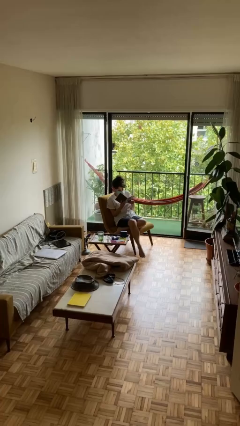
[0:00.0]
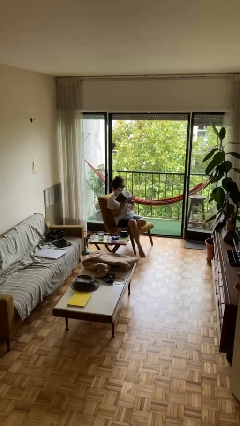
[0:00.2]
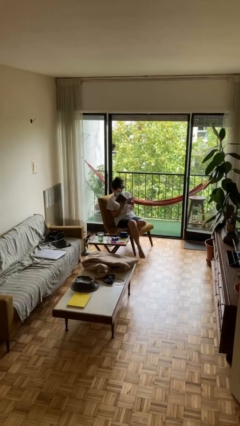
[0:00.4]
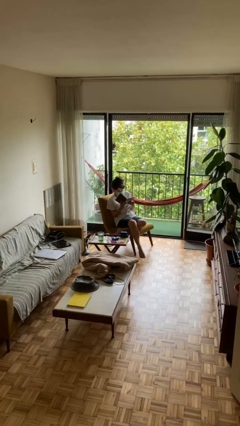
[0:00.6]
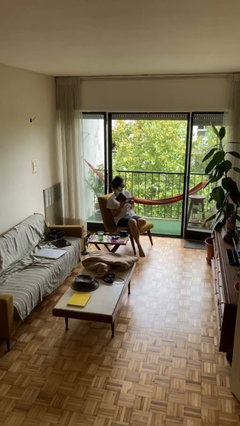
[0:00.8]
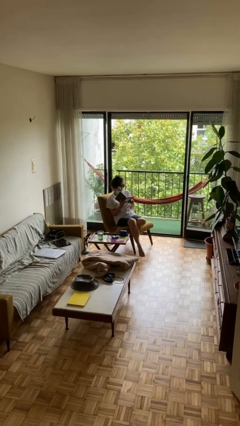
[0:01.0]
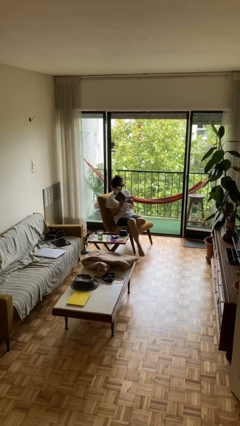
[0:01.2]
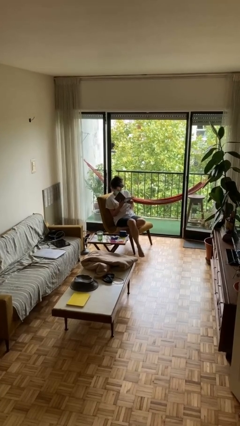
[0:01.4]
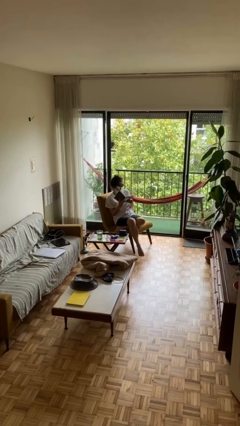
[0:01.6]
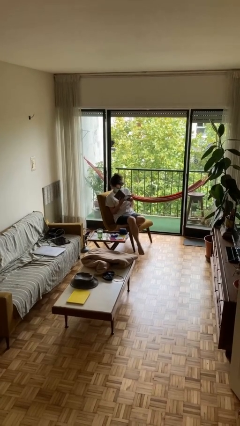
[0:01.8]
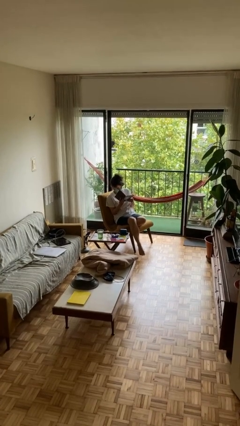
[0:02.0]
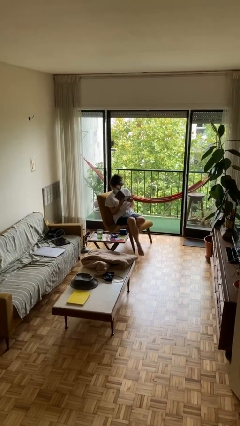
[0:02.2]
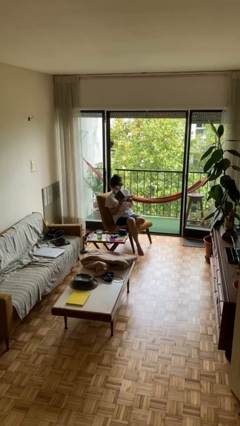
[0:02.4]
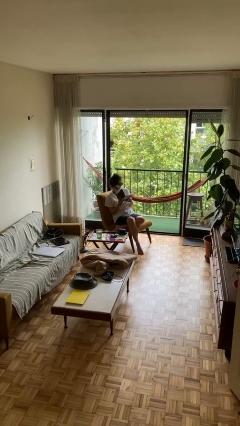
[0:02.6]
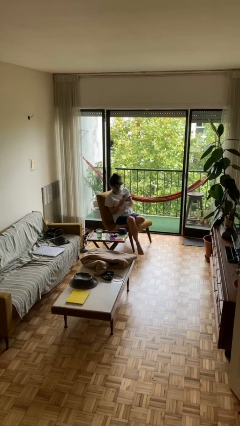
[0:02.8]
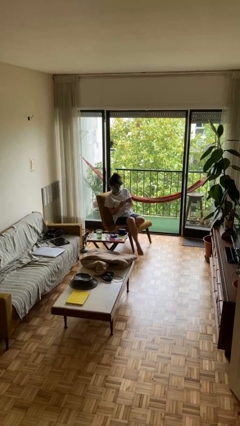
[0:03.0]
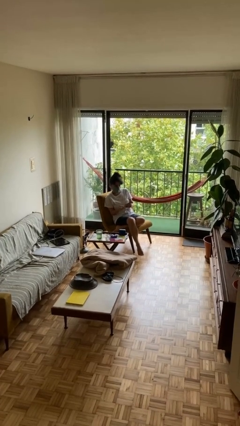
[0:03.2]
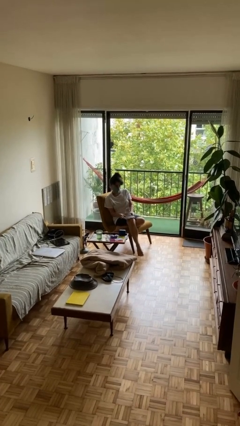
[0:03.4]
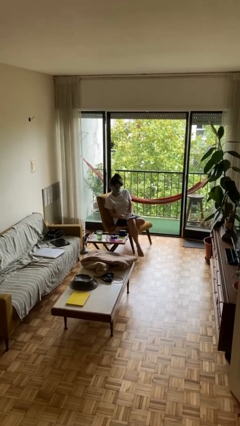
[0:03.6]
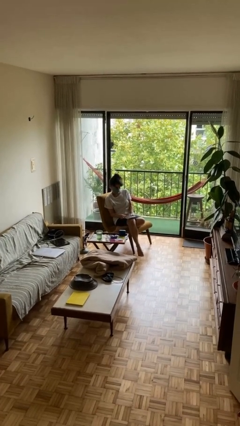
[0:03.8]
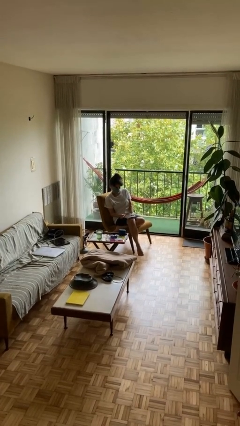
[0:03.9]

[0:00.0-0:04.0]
person reads document

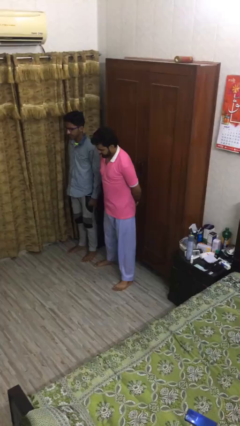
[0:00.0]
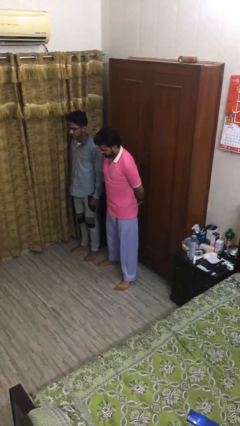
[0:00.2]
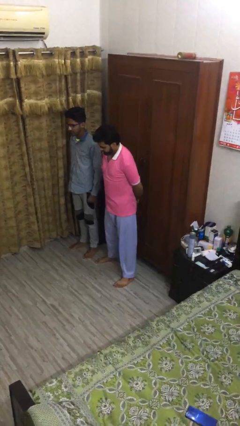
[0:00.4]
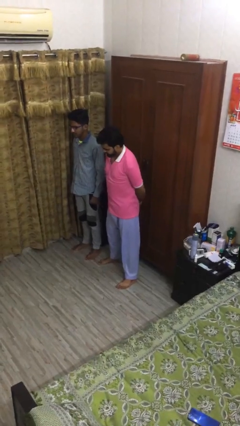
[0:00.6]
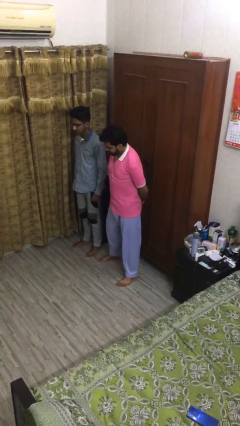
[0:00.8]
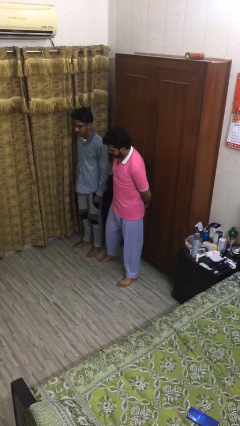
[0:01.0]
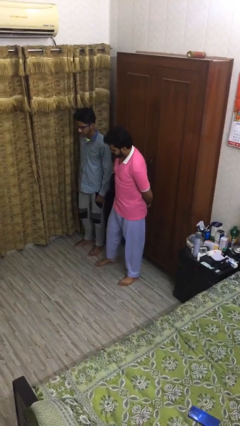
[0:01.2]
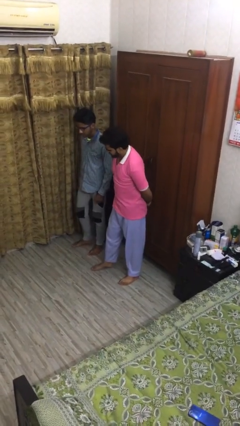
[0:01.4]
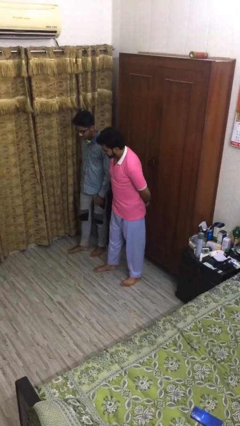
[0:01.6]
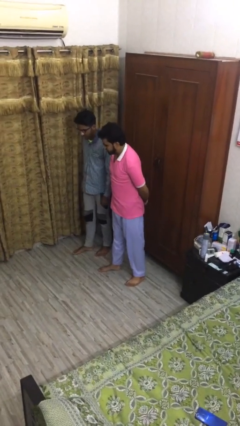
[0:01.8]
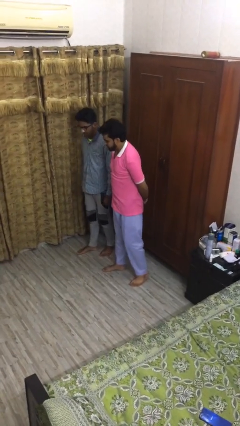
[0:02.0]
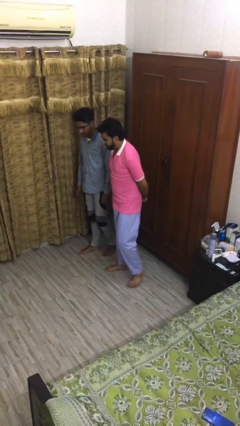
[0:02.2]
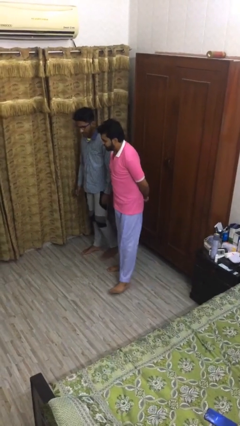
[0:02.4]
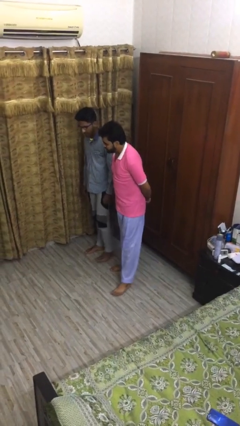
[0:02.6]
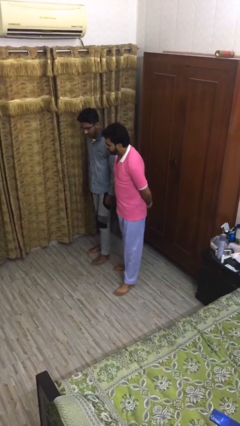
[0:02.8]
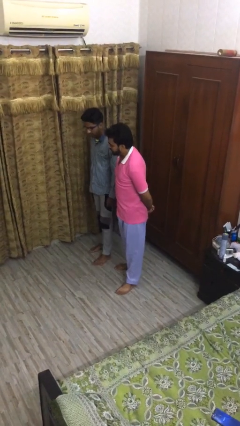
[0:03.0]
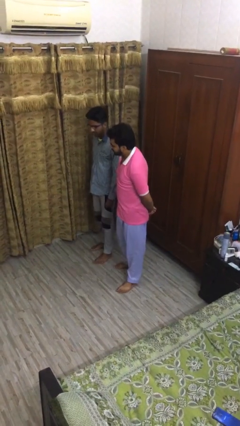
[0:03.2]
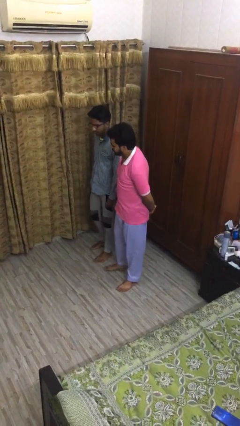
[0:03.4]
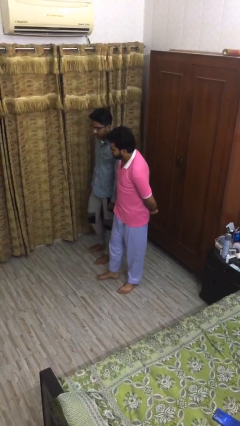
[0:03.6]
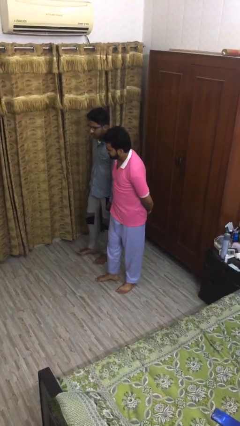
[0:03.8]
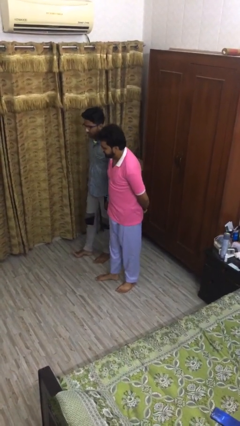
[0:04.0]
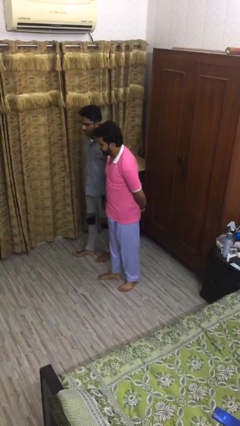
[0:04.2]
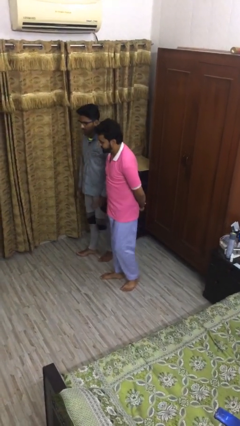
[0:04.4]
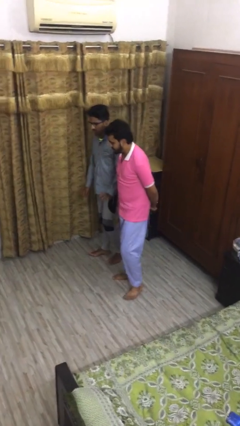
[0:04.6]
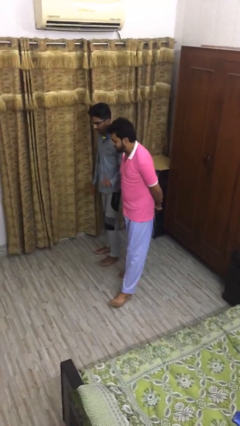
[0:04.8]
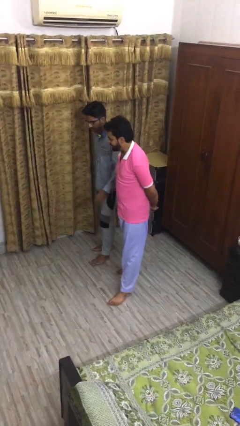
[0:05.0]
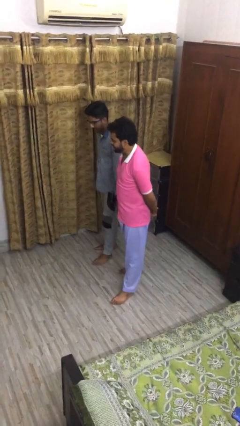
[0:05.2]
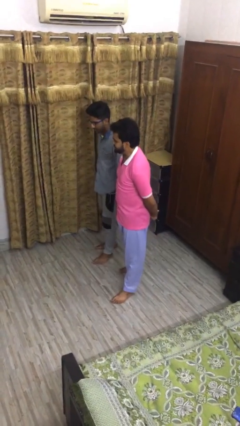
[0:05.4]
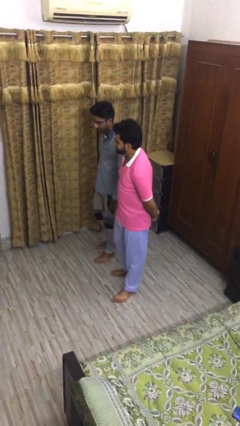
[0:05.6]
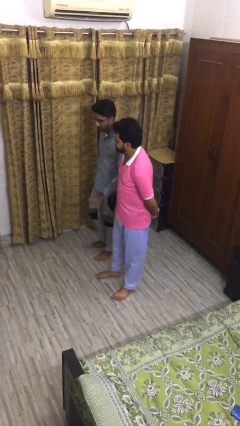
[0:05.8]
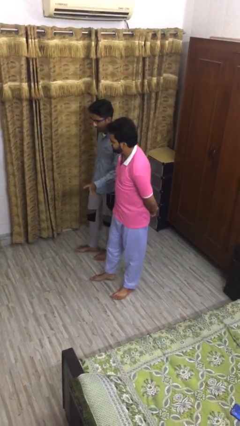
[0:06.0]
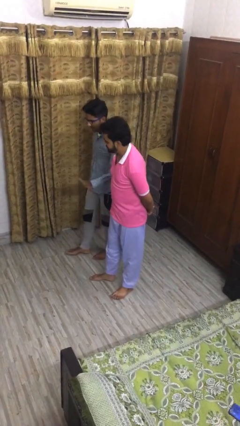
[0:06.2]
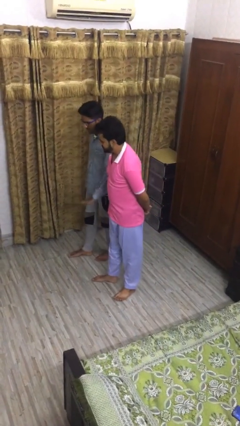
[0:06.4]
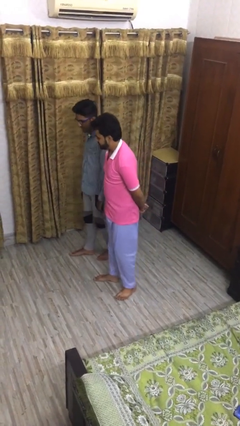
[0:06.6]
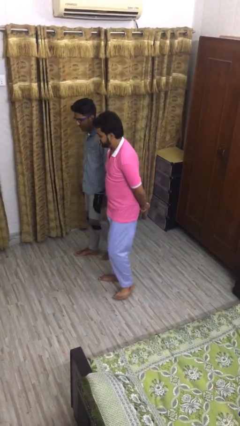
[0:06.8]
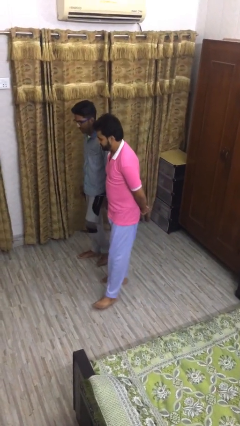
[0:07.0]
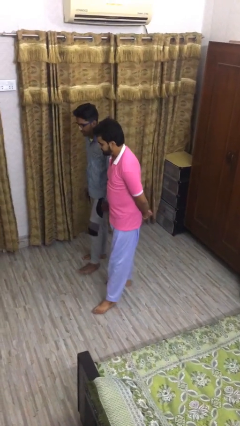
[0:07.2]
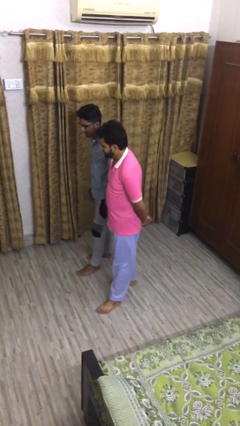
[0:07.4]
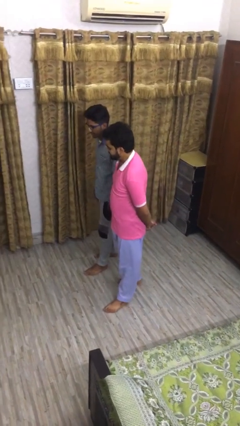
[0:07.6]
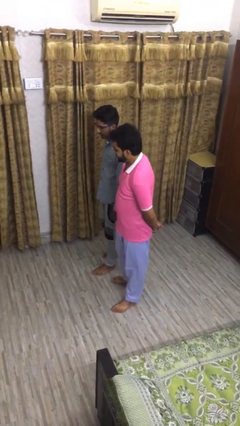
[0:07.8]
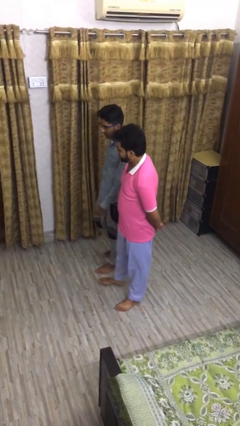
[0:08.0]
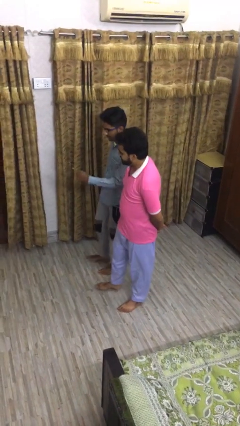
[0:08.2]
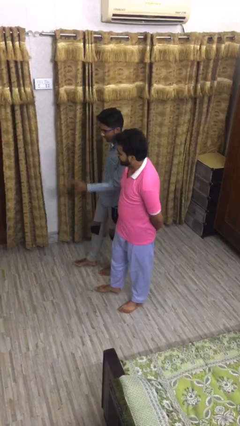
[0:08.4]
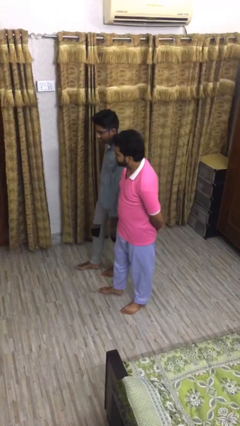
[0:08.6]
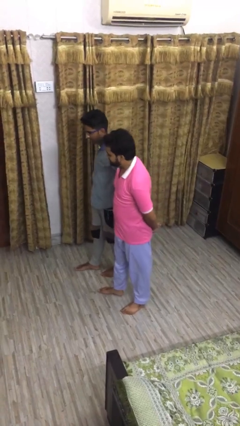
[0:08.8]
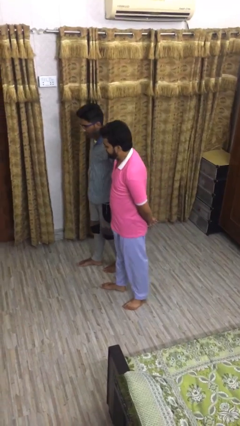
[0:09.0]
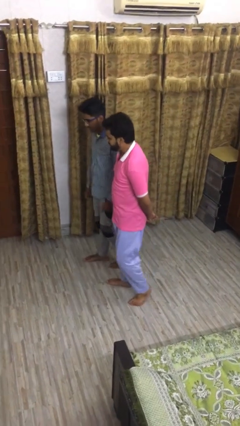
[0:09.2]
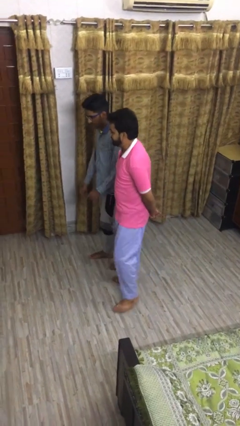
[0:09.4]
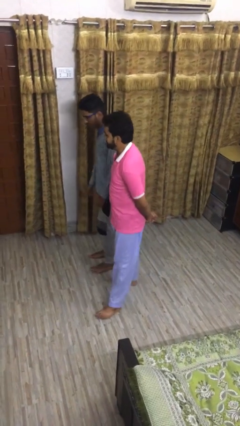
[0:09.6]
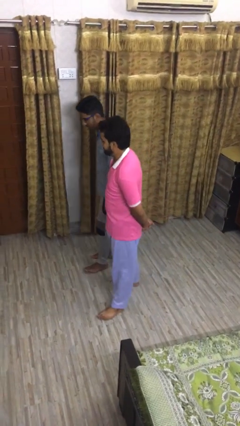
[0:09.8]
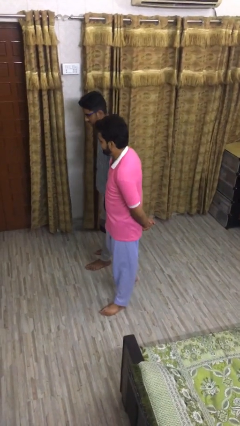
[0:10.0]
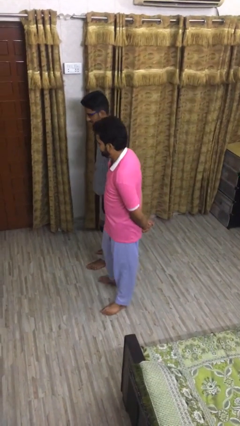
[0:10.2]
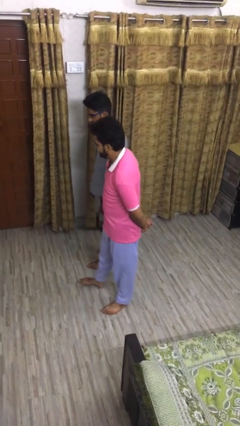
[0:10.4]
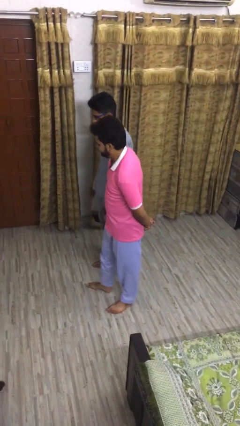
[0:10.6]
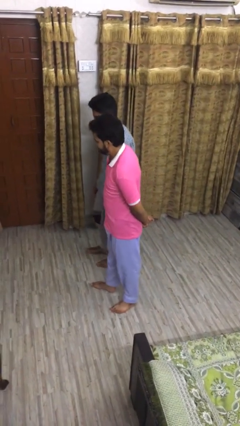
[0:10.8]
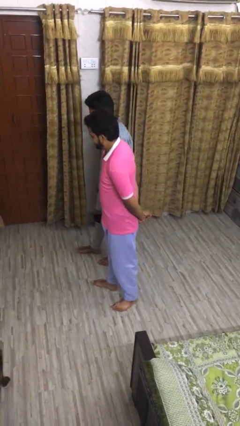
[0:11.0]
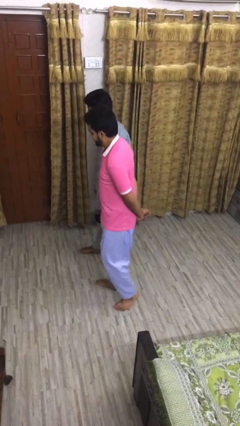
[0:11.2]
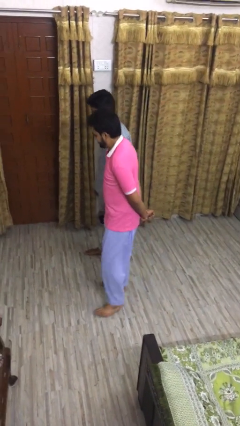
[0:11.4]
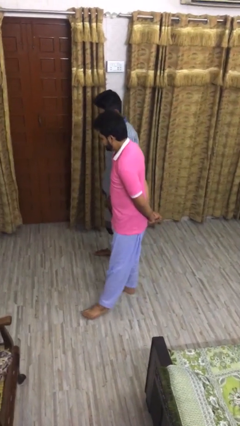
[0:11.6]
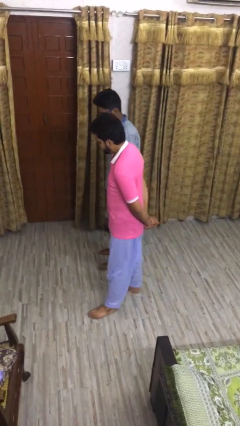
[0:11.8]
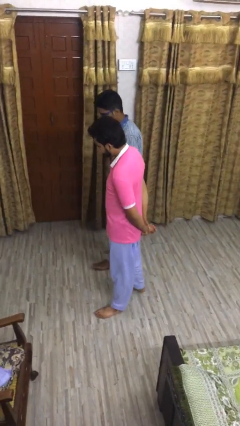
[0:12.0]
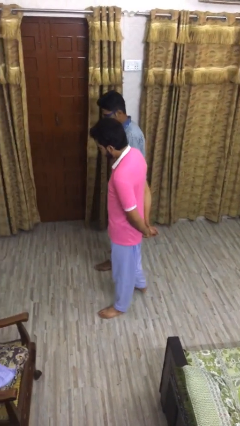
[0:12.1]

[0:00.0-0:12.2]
person talks to person

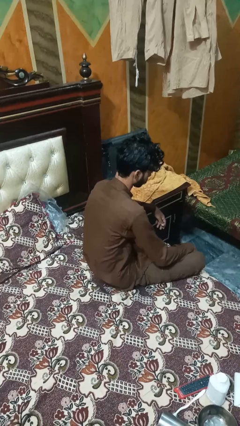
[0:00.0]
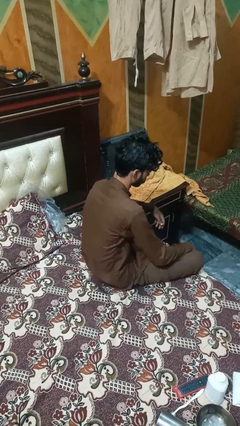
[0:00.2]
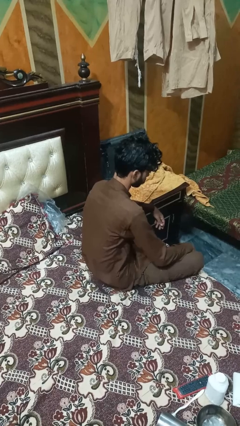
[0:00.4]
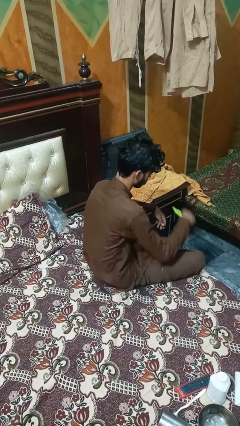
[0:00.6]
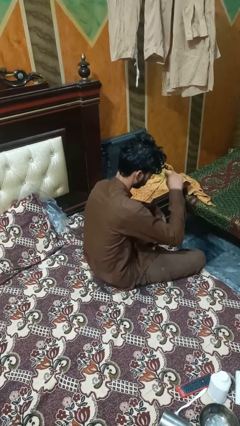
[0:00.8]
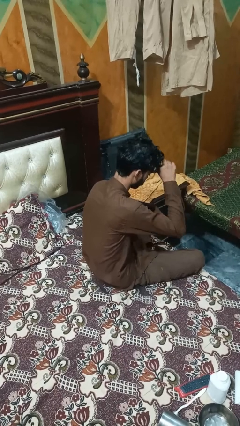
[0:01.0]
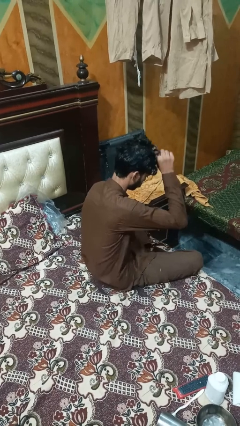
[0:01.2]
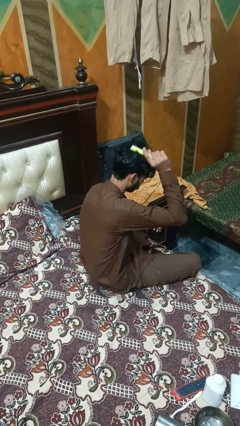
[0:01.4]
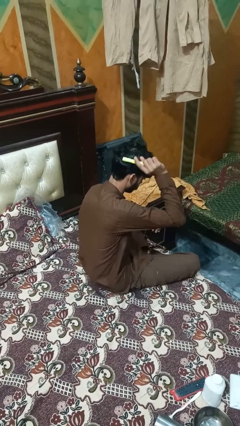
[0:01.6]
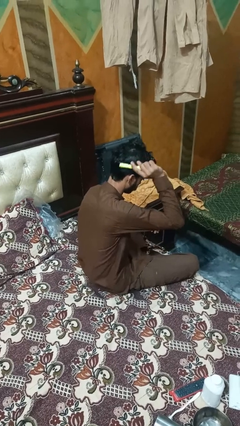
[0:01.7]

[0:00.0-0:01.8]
person brushes hair

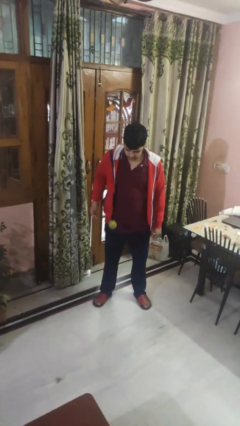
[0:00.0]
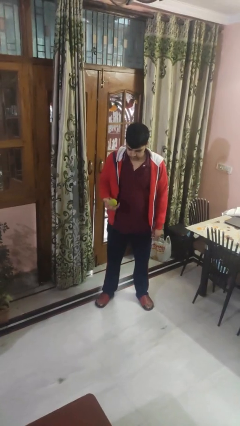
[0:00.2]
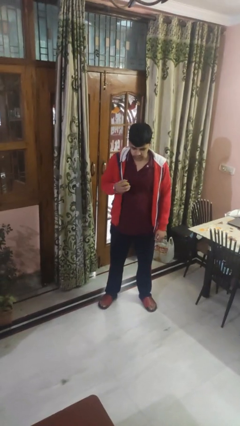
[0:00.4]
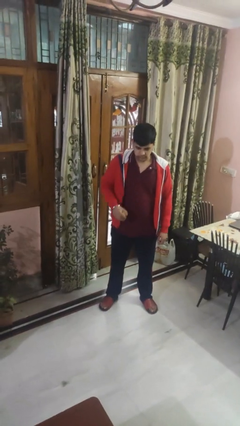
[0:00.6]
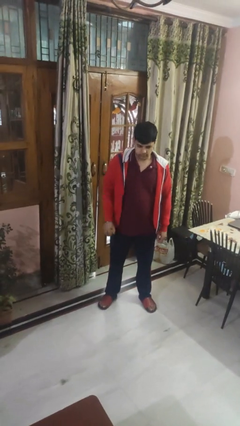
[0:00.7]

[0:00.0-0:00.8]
person bounces ball on floor
